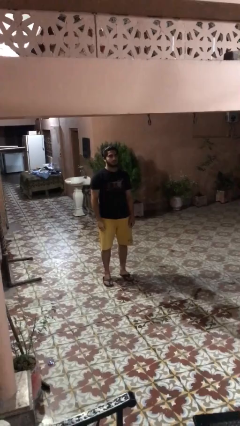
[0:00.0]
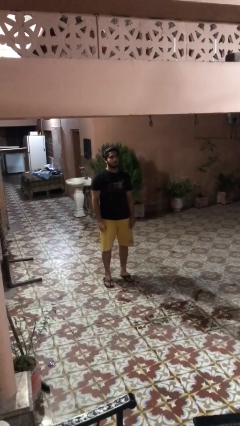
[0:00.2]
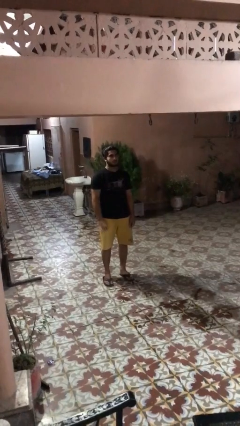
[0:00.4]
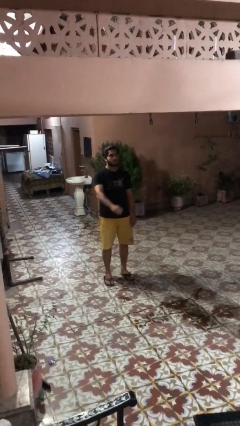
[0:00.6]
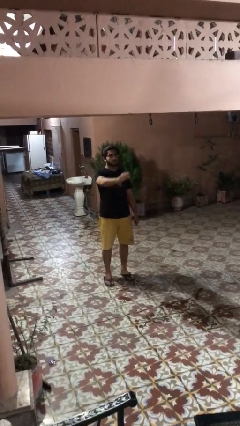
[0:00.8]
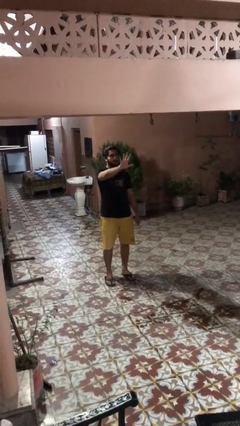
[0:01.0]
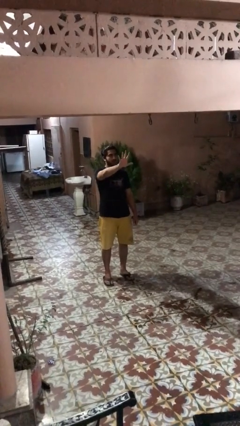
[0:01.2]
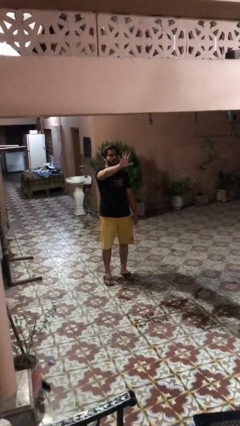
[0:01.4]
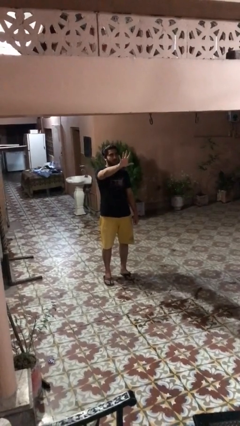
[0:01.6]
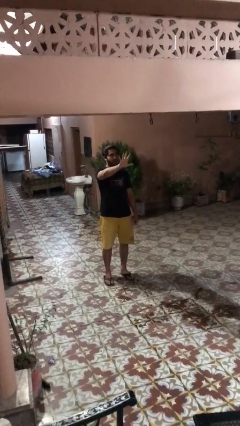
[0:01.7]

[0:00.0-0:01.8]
person gestures number five

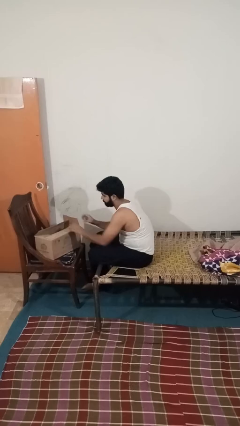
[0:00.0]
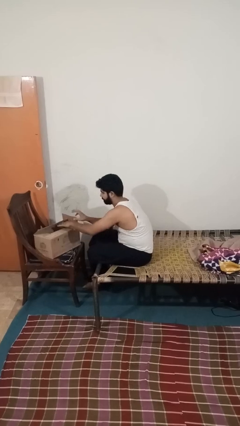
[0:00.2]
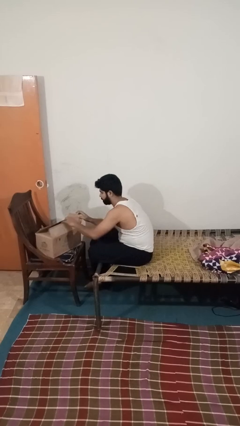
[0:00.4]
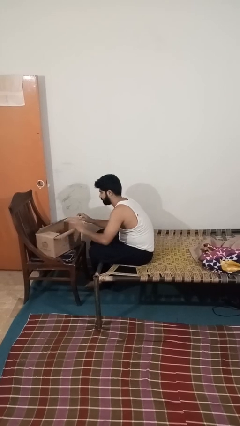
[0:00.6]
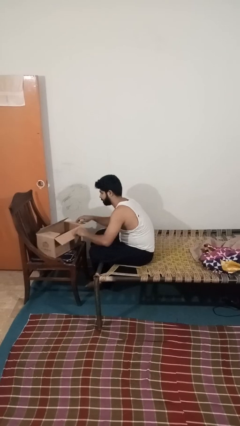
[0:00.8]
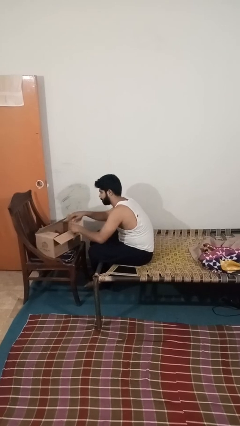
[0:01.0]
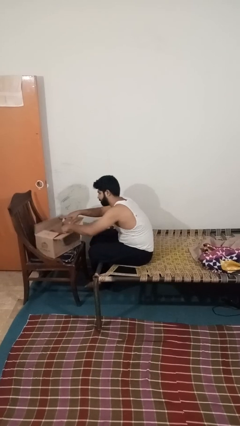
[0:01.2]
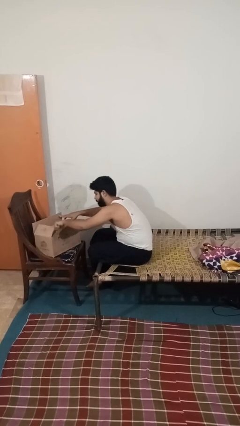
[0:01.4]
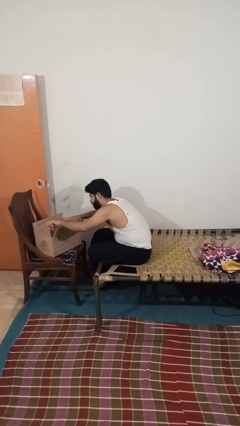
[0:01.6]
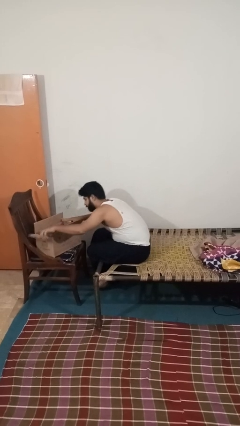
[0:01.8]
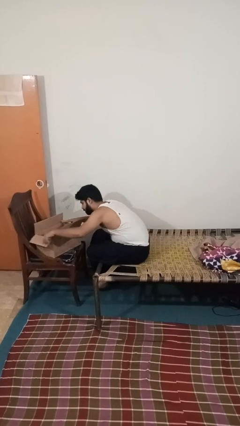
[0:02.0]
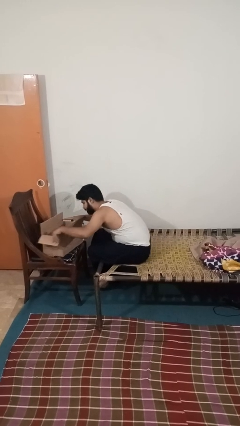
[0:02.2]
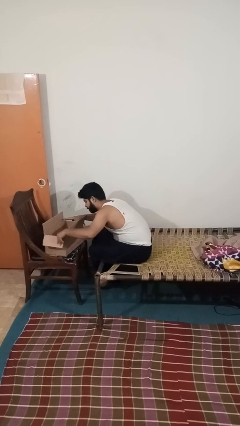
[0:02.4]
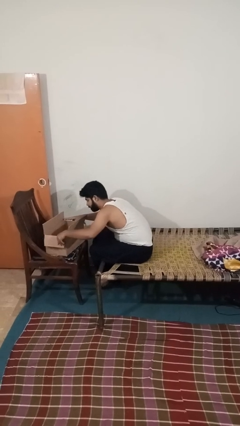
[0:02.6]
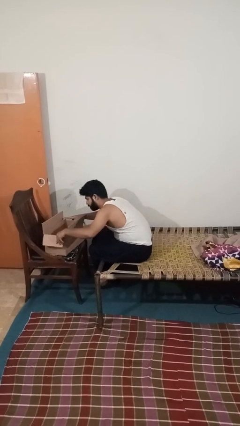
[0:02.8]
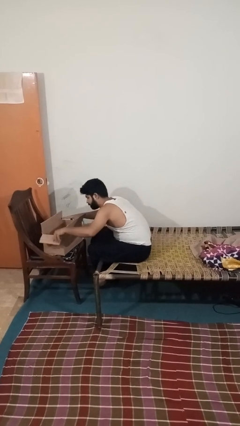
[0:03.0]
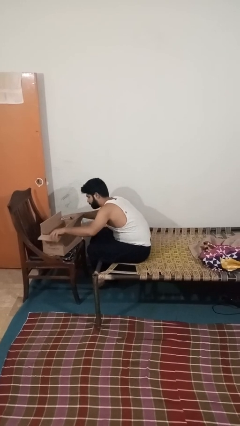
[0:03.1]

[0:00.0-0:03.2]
person opens box

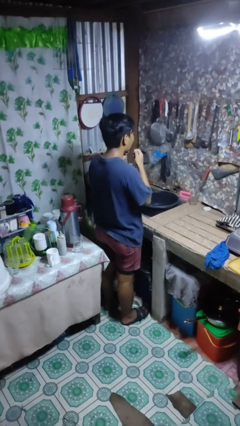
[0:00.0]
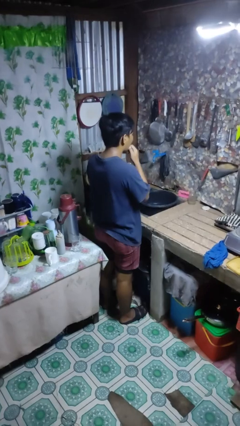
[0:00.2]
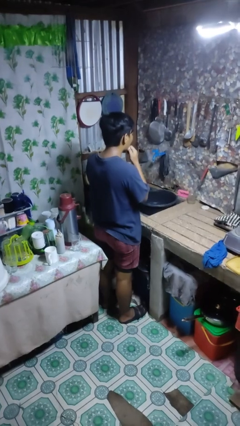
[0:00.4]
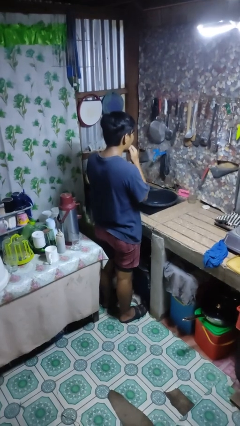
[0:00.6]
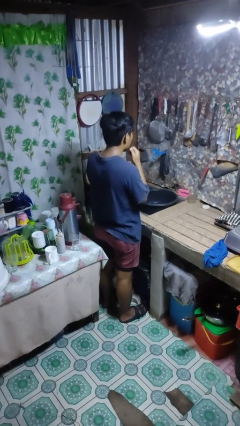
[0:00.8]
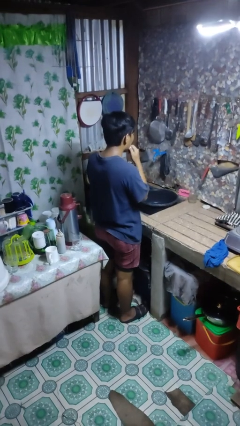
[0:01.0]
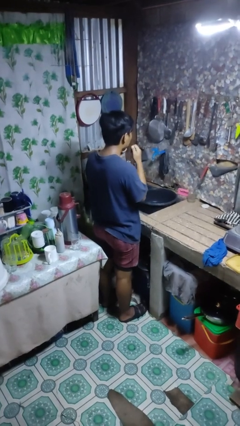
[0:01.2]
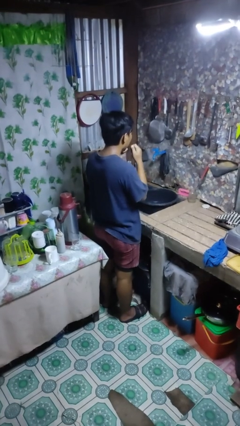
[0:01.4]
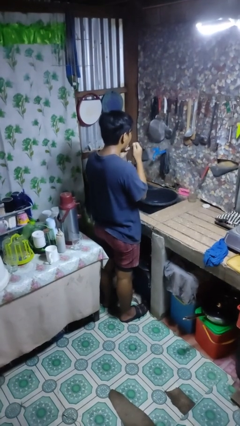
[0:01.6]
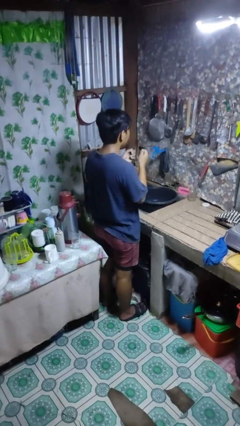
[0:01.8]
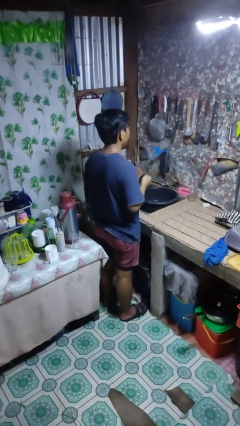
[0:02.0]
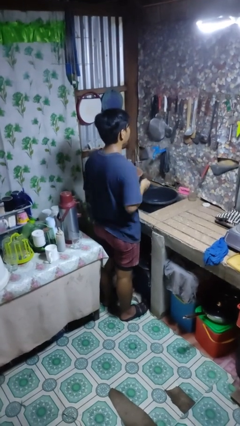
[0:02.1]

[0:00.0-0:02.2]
person flosses

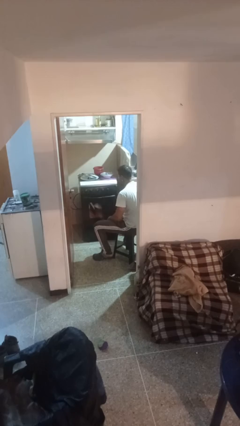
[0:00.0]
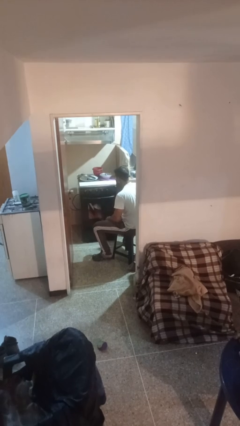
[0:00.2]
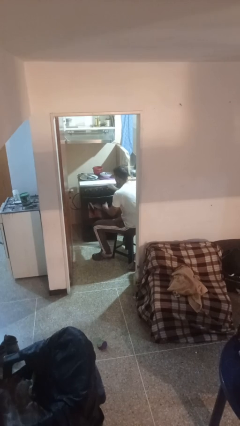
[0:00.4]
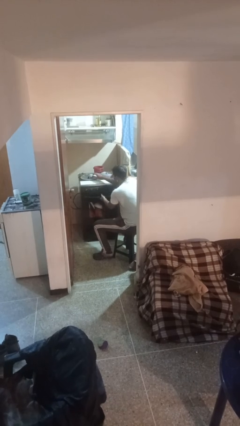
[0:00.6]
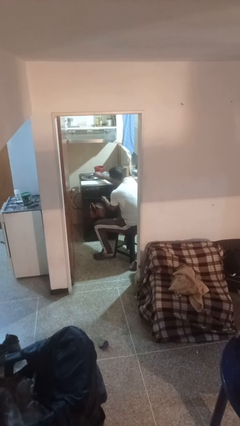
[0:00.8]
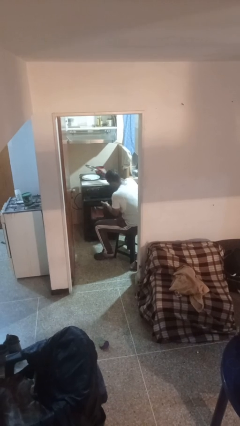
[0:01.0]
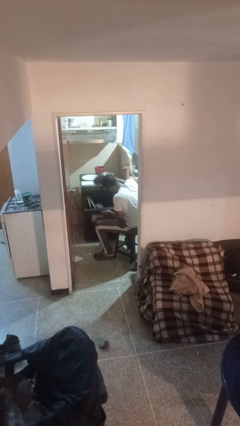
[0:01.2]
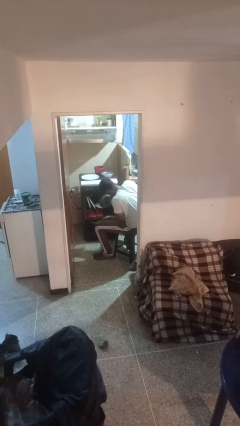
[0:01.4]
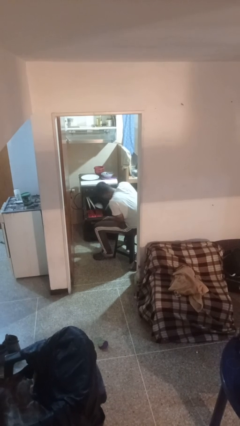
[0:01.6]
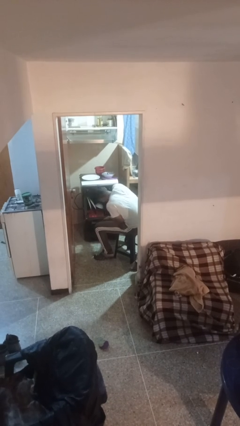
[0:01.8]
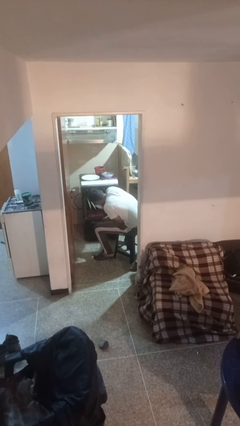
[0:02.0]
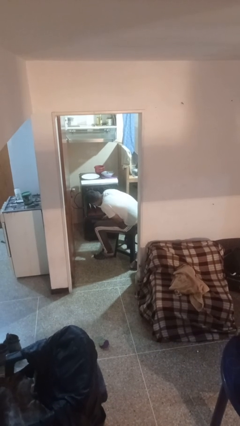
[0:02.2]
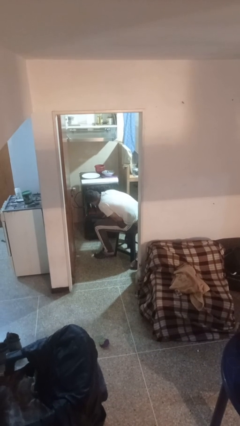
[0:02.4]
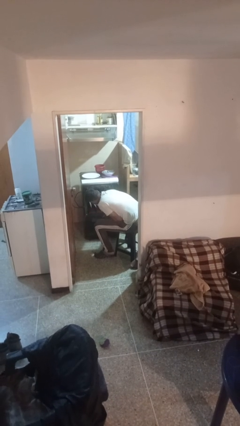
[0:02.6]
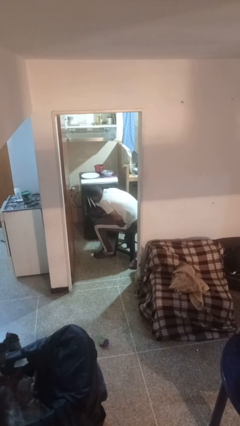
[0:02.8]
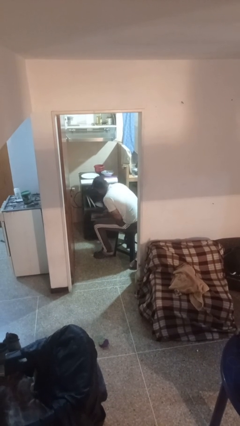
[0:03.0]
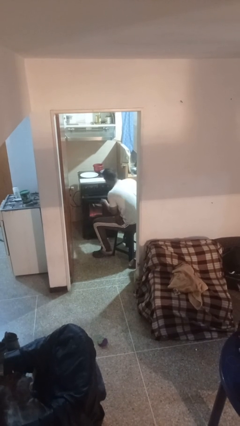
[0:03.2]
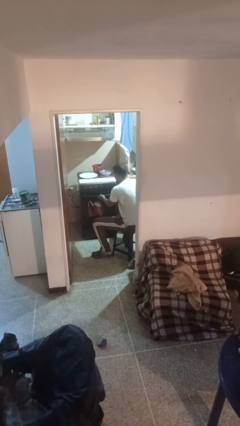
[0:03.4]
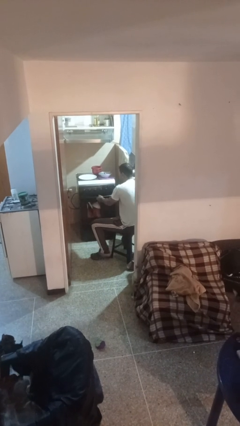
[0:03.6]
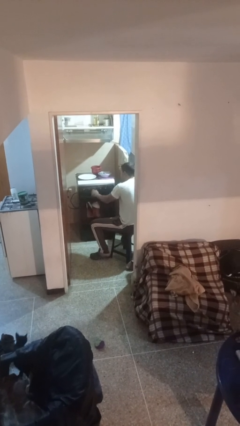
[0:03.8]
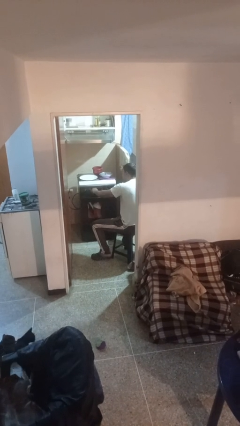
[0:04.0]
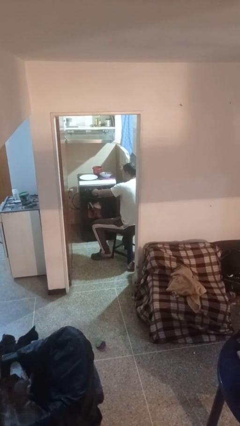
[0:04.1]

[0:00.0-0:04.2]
person loads dishwasher

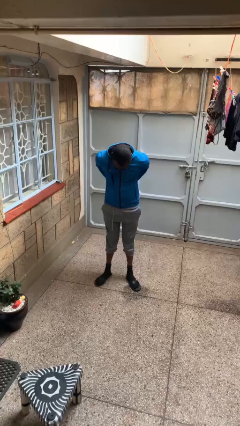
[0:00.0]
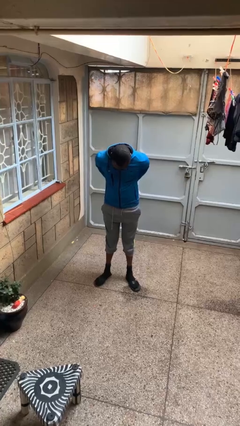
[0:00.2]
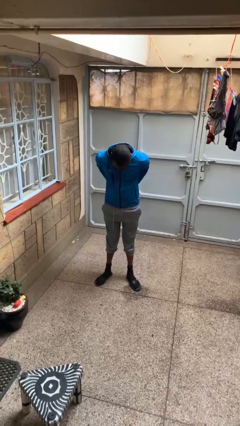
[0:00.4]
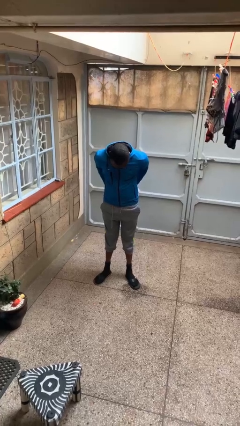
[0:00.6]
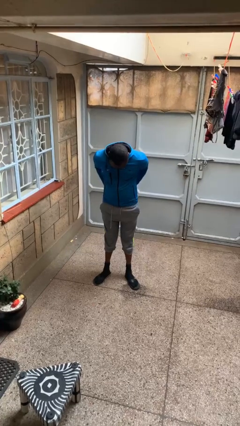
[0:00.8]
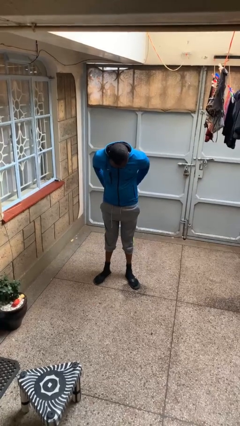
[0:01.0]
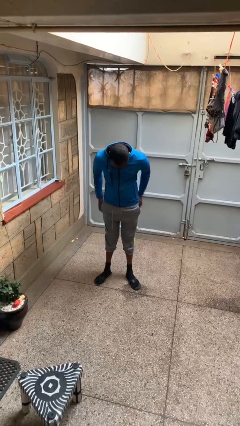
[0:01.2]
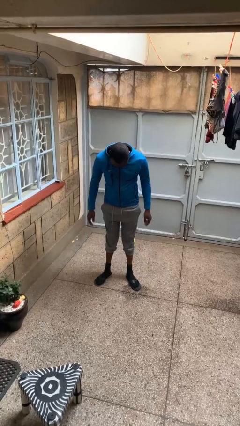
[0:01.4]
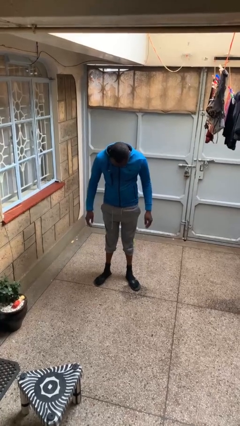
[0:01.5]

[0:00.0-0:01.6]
person puts hands in back pockets

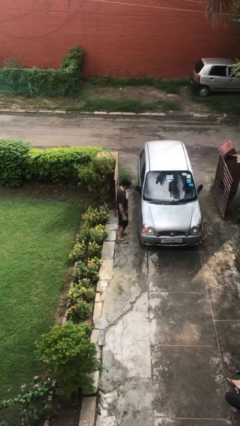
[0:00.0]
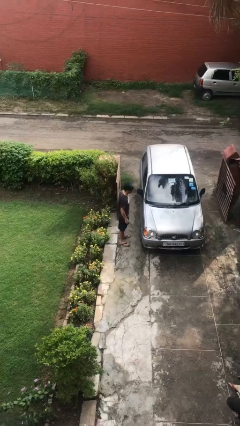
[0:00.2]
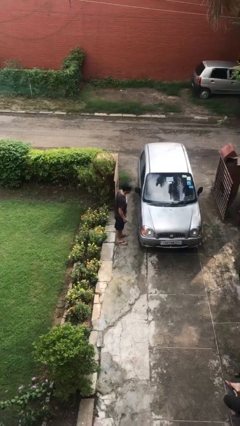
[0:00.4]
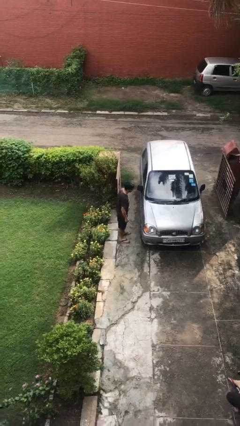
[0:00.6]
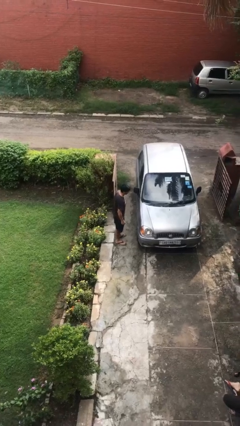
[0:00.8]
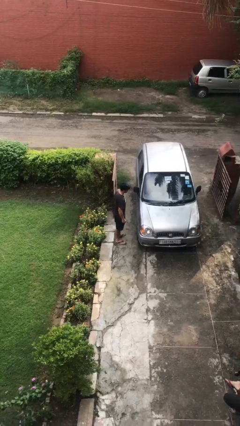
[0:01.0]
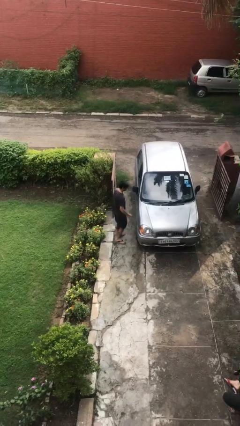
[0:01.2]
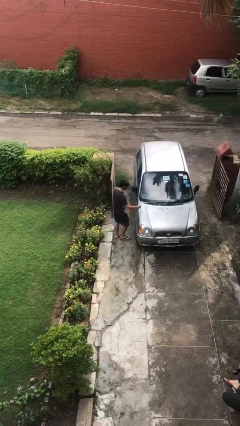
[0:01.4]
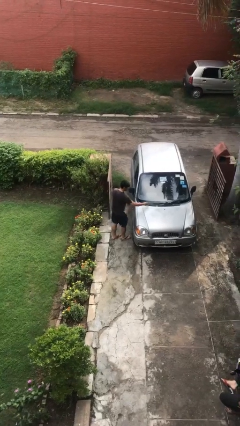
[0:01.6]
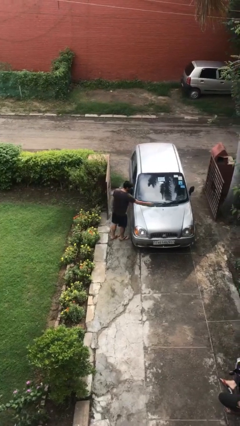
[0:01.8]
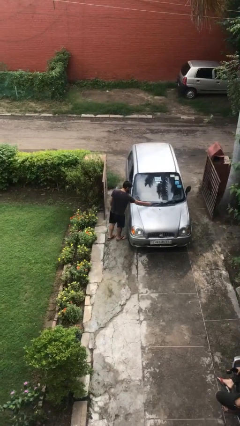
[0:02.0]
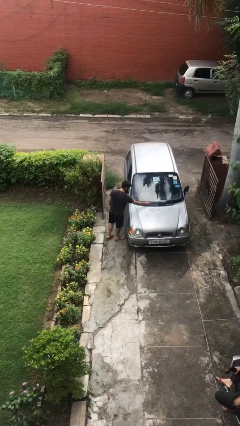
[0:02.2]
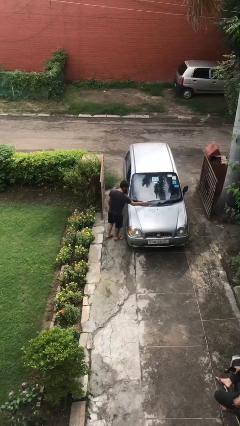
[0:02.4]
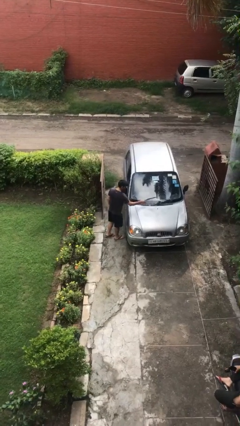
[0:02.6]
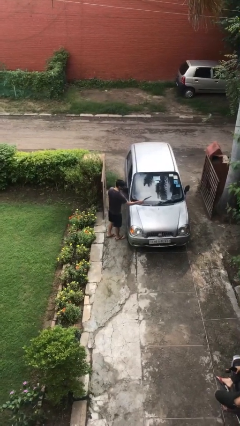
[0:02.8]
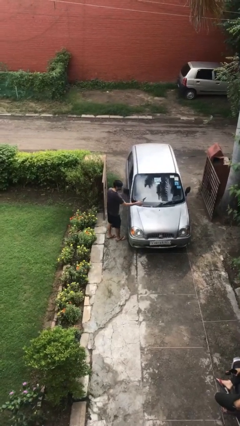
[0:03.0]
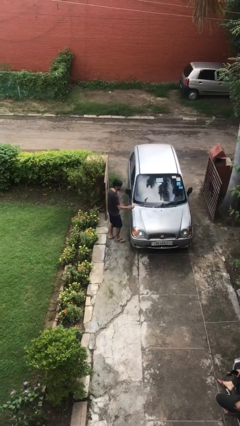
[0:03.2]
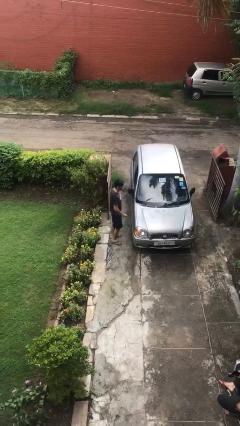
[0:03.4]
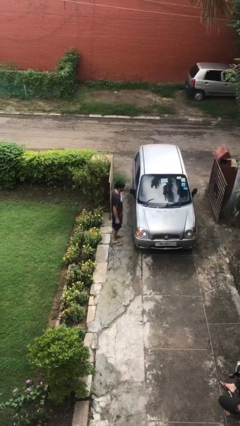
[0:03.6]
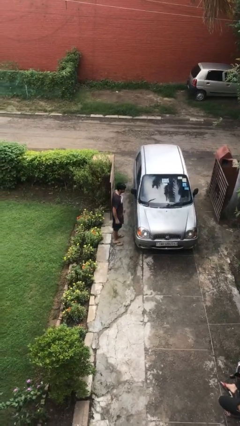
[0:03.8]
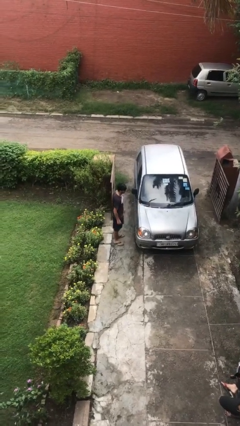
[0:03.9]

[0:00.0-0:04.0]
person flips up car wipers
